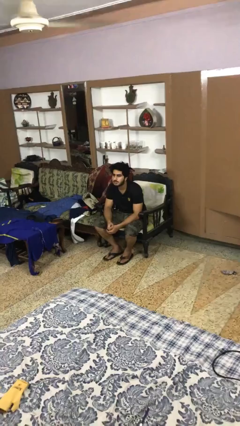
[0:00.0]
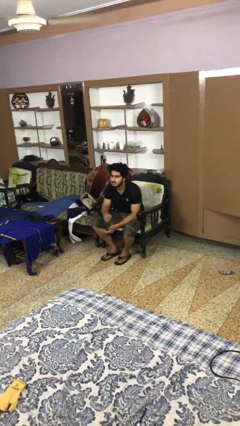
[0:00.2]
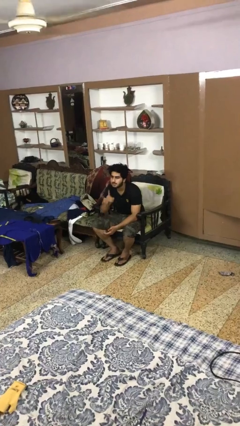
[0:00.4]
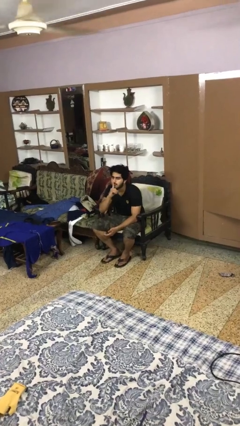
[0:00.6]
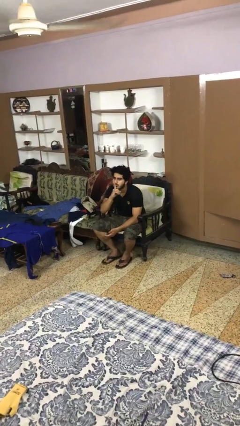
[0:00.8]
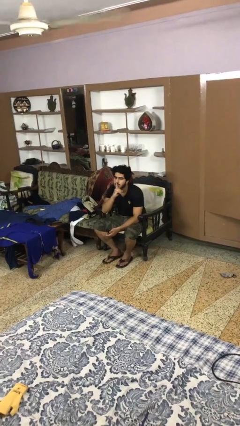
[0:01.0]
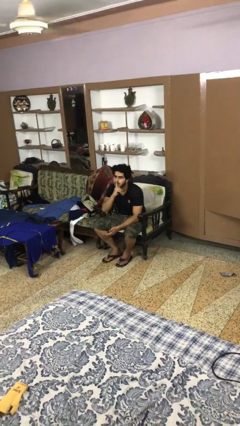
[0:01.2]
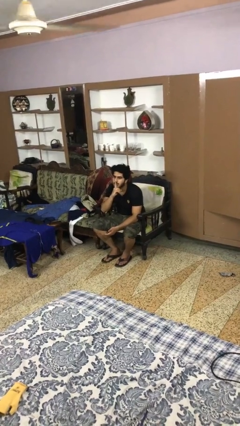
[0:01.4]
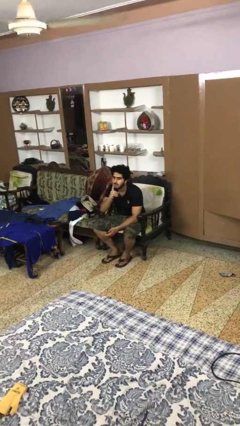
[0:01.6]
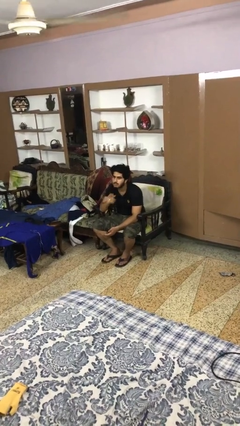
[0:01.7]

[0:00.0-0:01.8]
person gestures be quiet

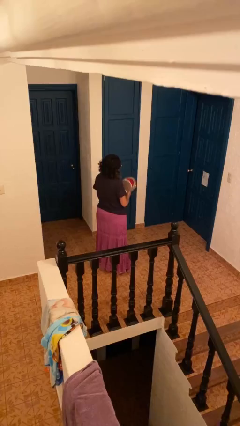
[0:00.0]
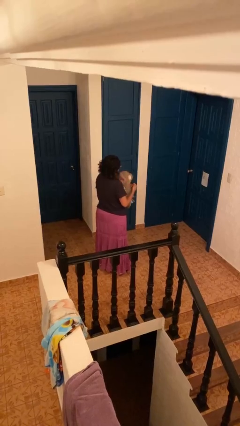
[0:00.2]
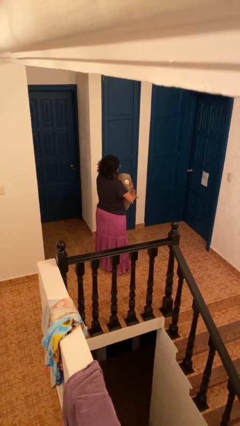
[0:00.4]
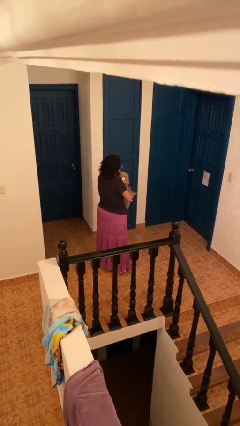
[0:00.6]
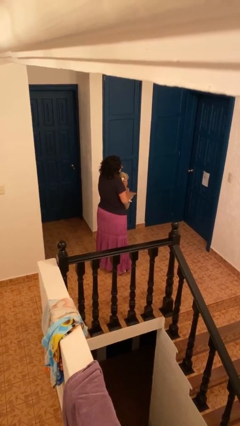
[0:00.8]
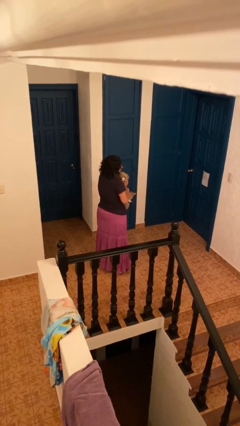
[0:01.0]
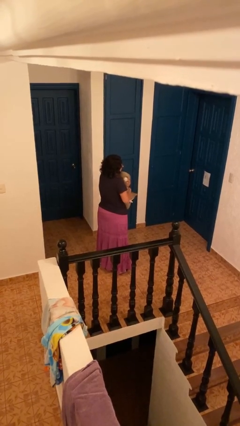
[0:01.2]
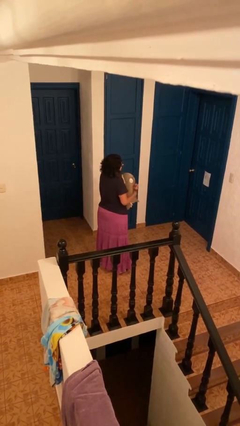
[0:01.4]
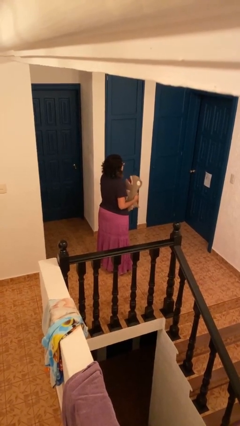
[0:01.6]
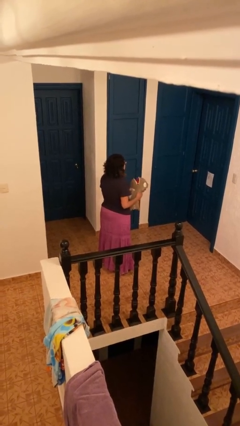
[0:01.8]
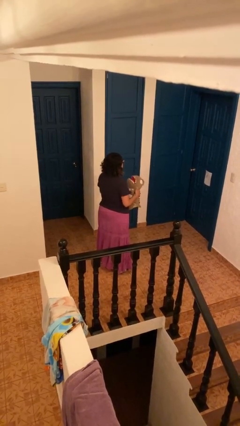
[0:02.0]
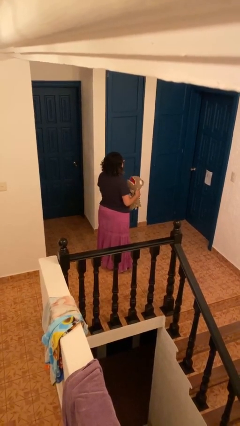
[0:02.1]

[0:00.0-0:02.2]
person hugs stuffed animal

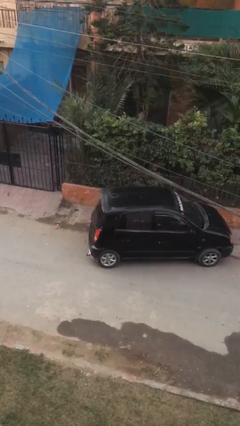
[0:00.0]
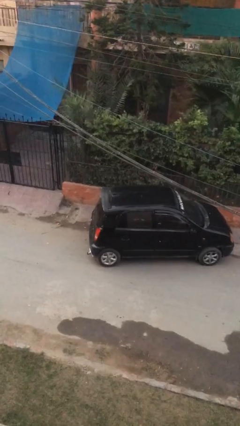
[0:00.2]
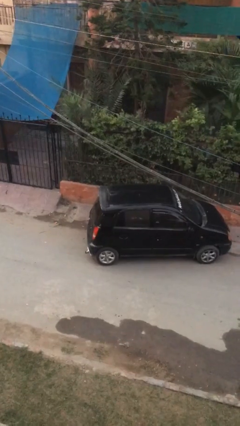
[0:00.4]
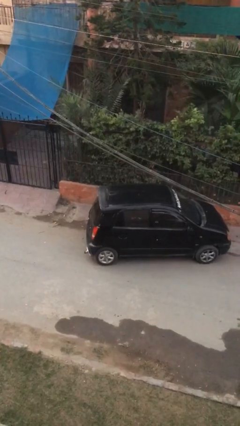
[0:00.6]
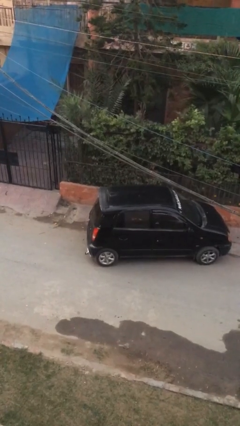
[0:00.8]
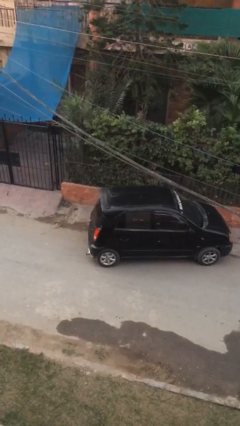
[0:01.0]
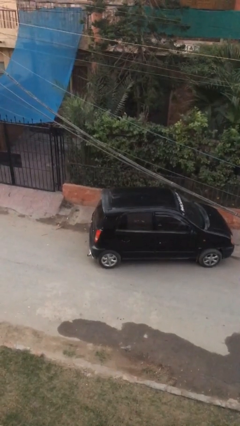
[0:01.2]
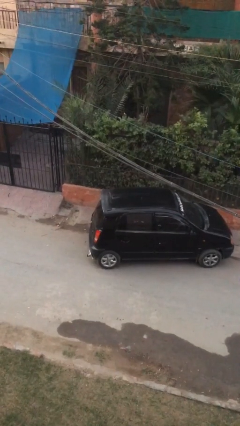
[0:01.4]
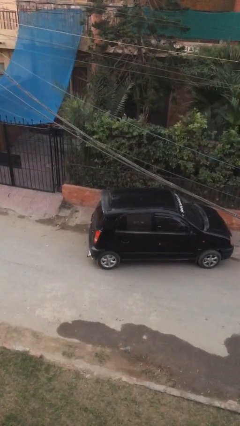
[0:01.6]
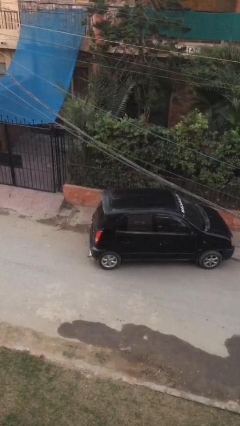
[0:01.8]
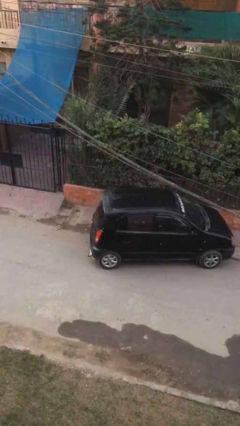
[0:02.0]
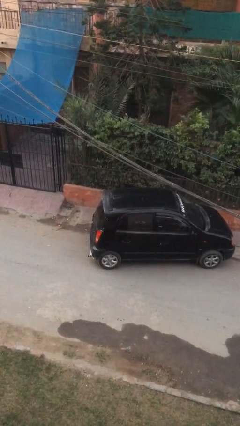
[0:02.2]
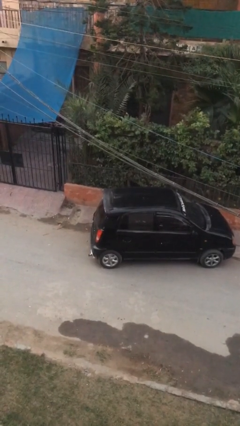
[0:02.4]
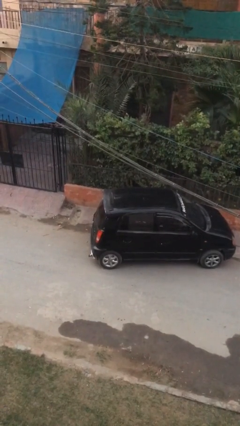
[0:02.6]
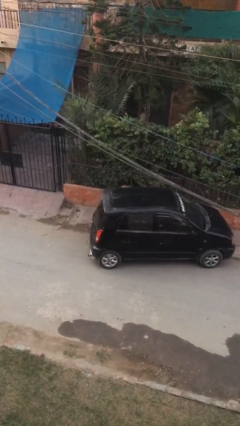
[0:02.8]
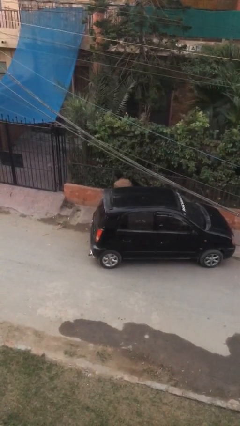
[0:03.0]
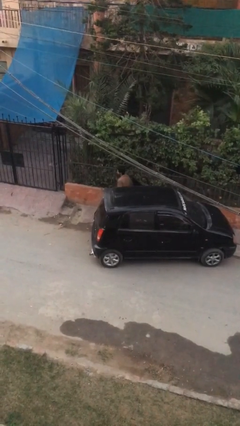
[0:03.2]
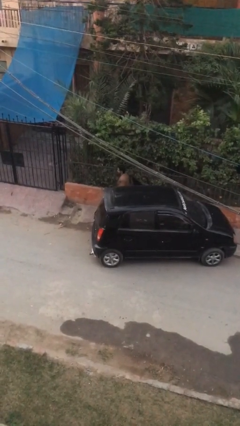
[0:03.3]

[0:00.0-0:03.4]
person exits car

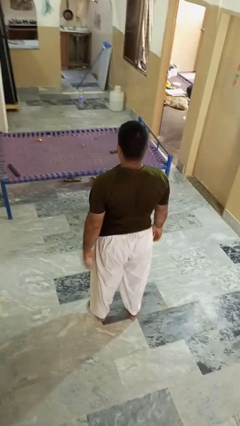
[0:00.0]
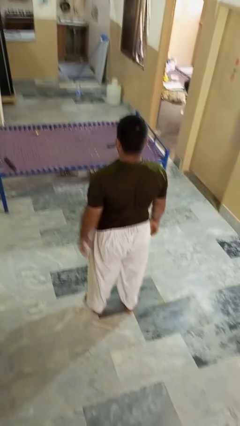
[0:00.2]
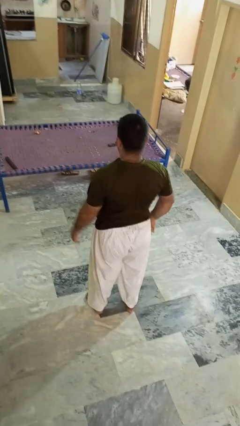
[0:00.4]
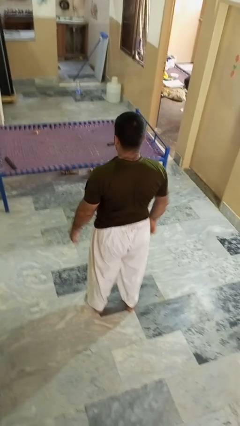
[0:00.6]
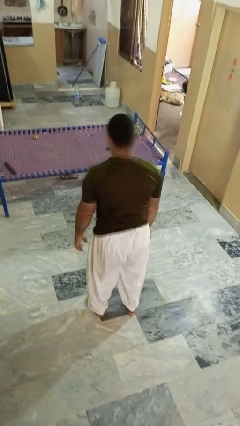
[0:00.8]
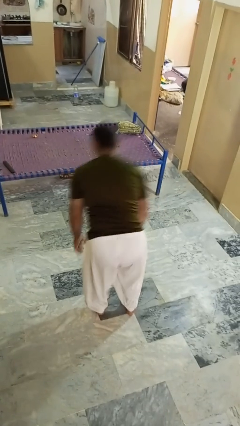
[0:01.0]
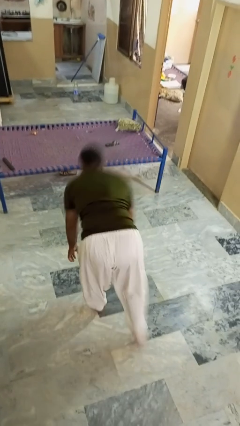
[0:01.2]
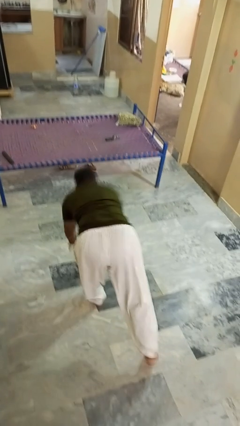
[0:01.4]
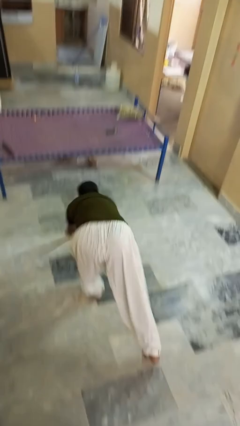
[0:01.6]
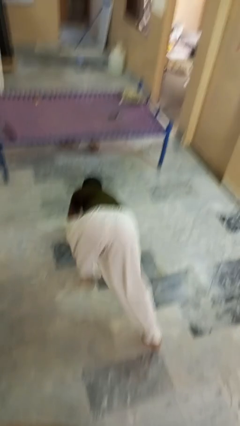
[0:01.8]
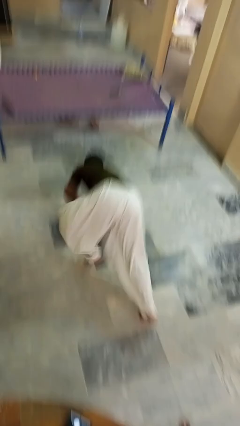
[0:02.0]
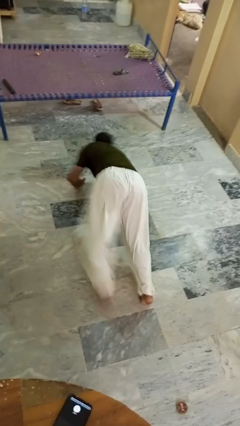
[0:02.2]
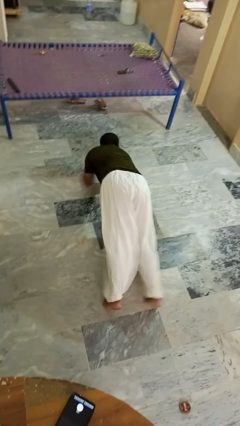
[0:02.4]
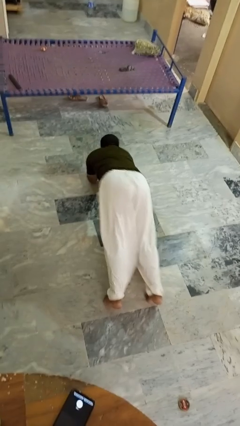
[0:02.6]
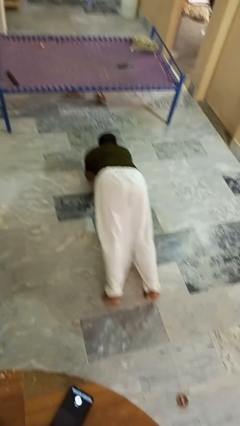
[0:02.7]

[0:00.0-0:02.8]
person exercises with plank

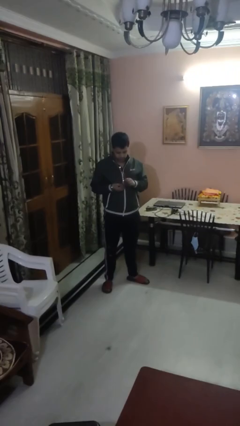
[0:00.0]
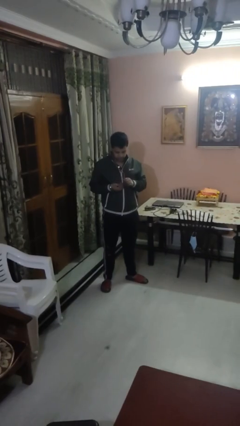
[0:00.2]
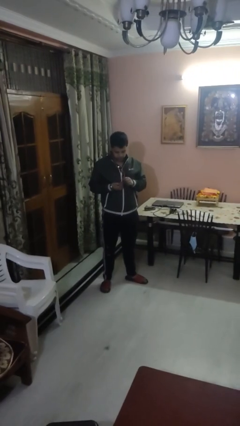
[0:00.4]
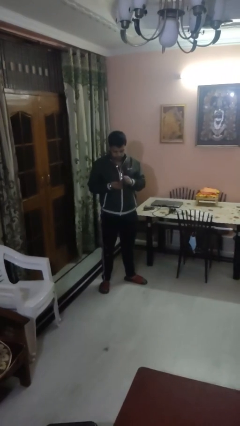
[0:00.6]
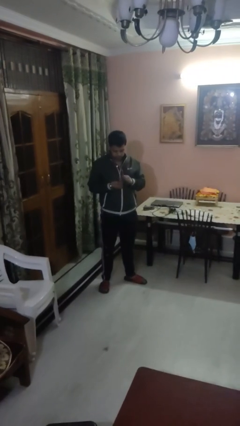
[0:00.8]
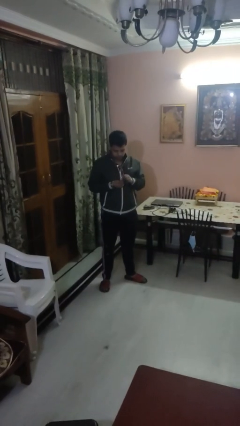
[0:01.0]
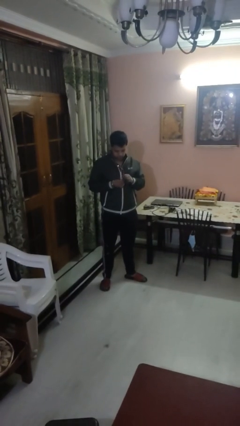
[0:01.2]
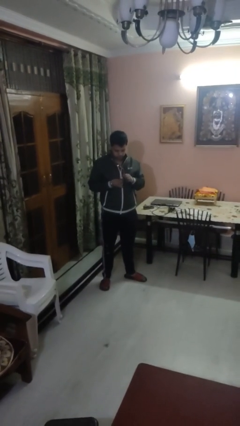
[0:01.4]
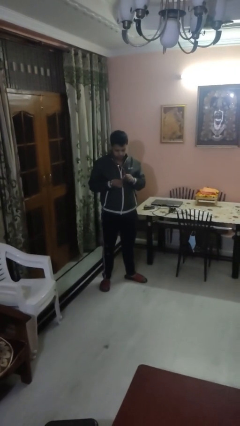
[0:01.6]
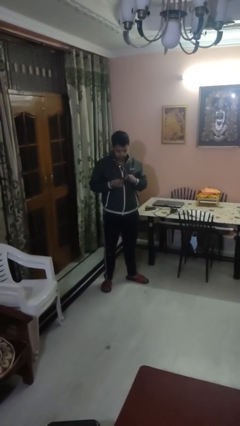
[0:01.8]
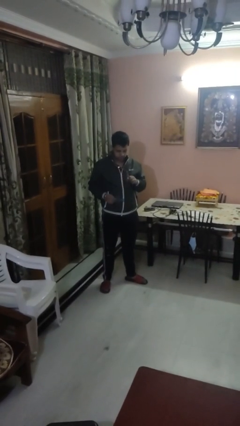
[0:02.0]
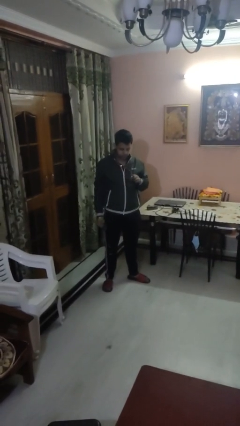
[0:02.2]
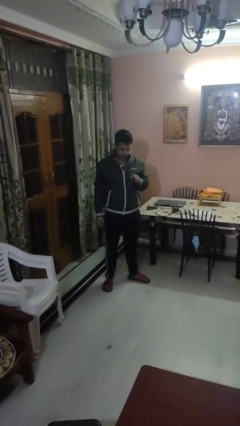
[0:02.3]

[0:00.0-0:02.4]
person cleans eyeglasses

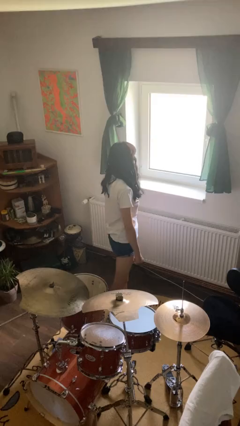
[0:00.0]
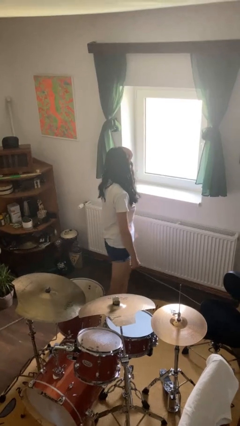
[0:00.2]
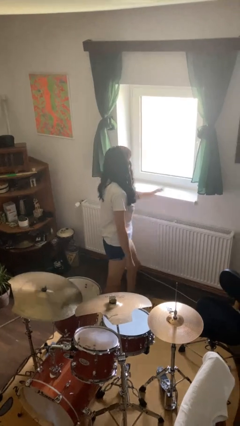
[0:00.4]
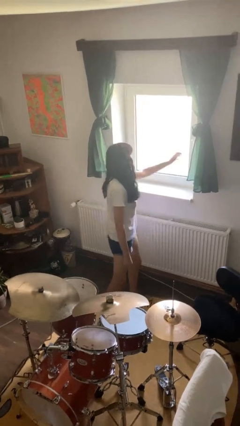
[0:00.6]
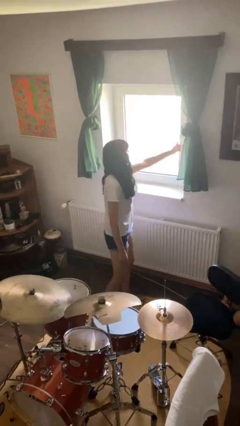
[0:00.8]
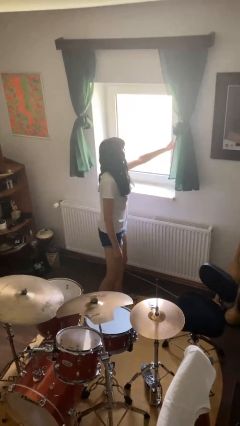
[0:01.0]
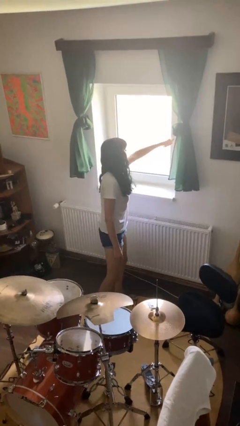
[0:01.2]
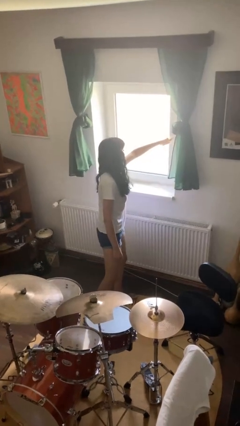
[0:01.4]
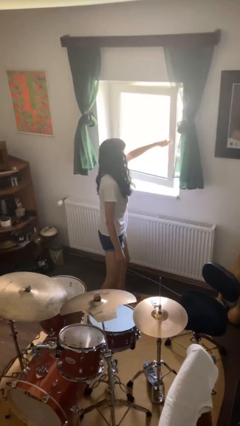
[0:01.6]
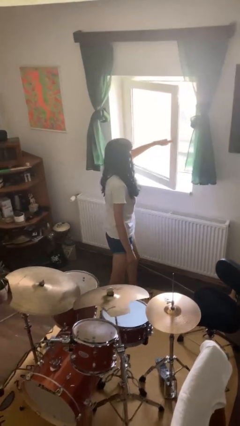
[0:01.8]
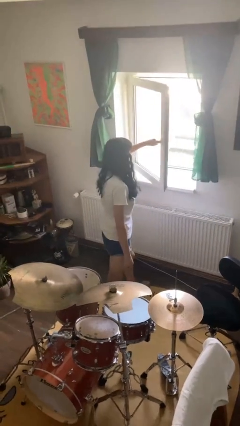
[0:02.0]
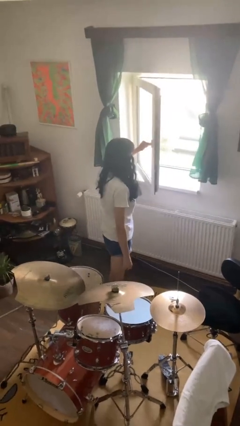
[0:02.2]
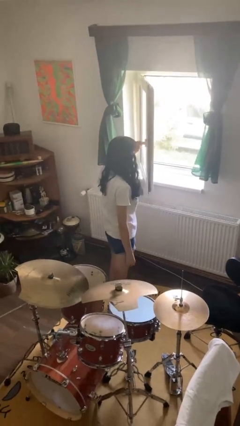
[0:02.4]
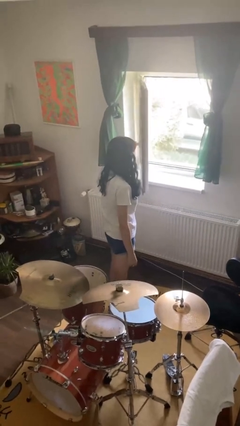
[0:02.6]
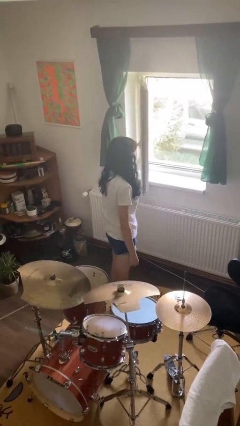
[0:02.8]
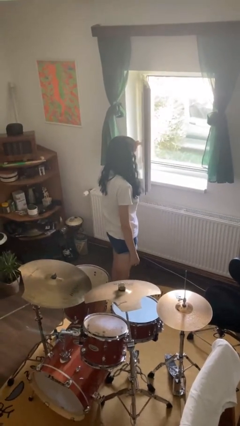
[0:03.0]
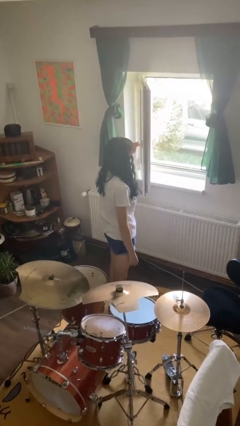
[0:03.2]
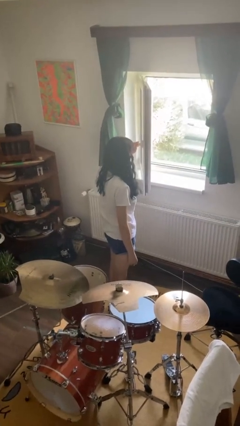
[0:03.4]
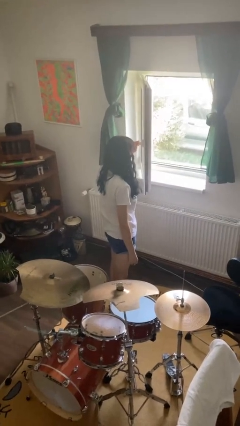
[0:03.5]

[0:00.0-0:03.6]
person opens home window

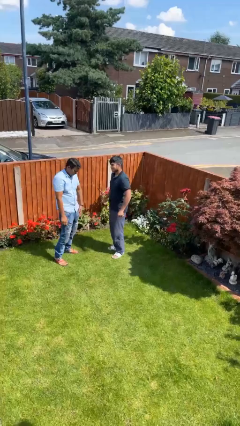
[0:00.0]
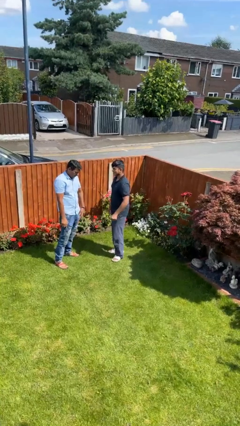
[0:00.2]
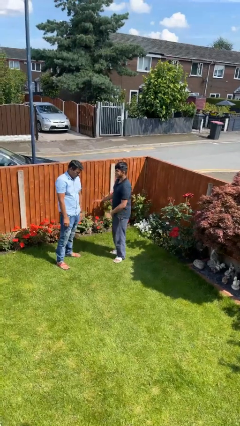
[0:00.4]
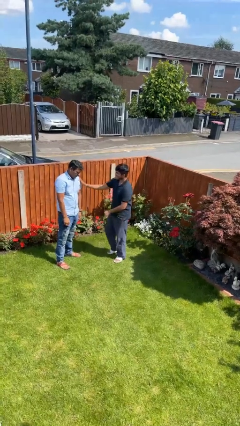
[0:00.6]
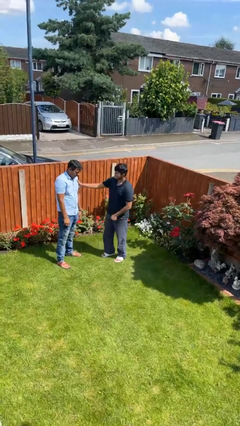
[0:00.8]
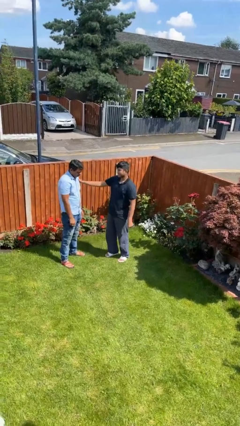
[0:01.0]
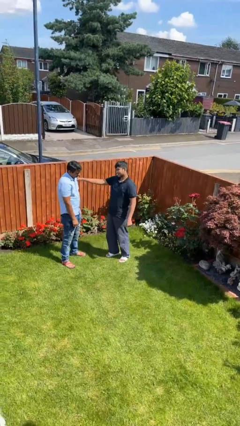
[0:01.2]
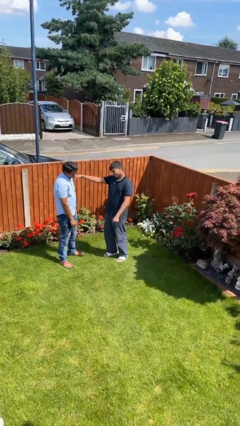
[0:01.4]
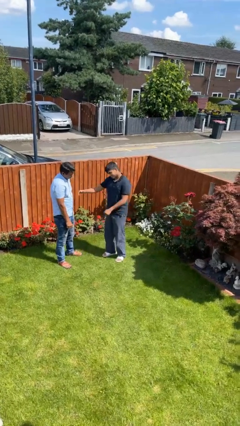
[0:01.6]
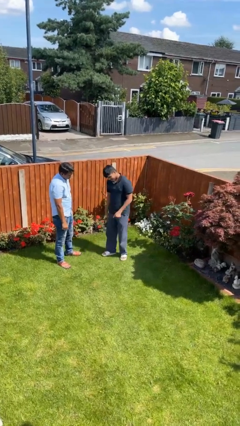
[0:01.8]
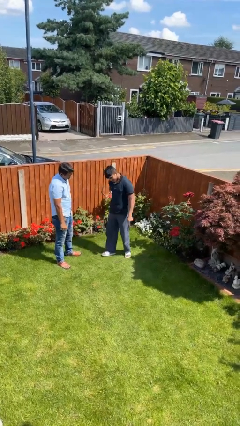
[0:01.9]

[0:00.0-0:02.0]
person shoves person
